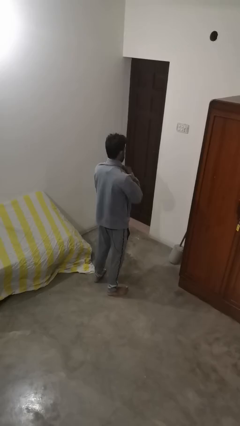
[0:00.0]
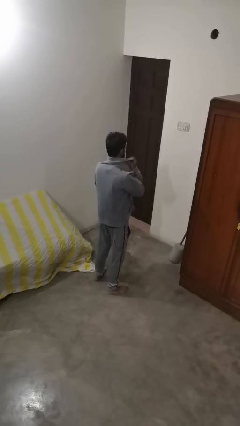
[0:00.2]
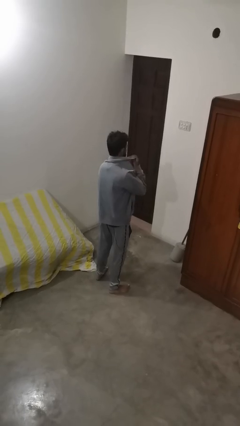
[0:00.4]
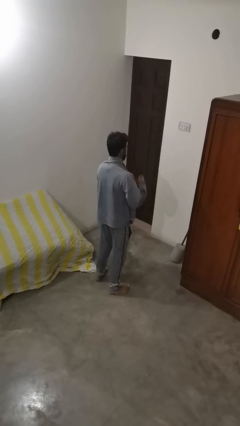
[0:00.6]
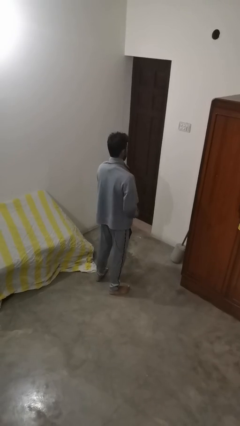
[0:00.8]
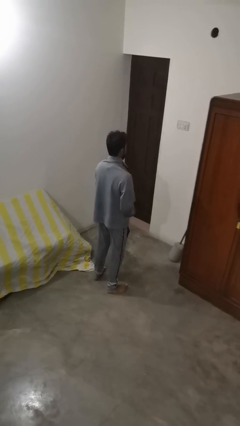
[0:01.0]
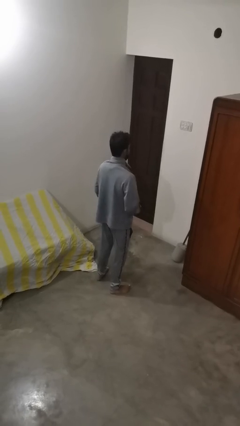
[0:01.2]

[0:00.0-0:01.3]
person unzips jacket

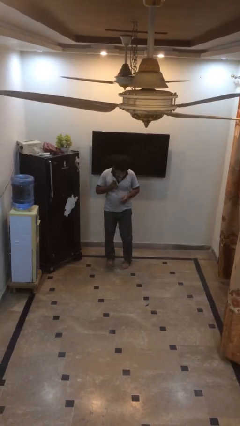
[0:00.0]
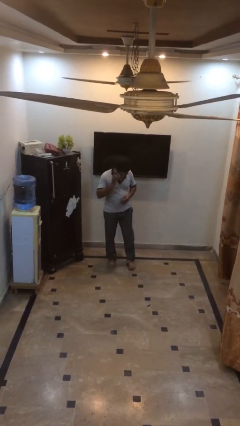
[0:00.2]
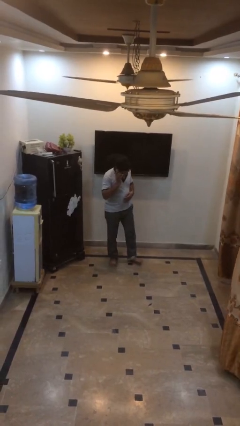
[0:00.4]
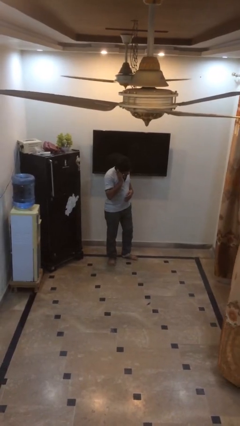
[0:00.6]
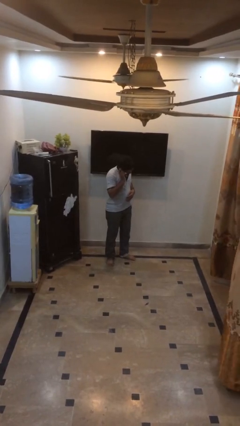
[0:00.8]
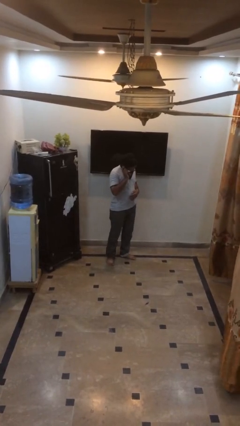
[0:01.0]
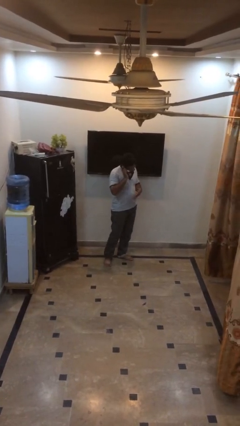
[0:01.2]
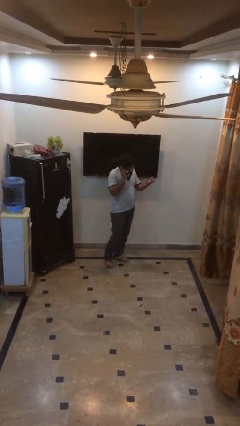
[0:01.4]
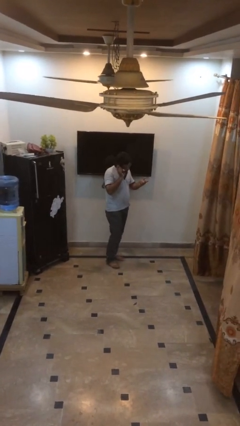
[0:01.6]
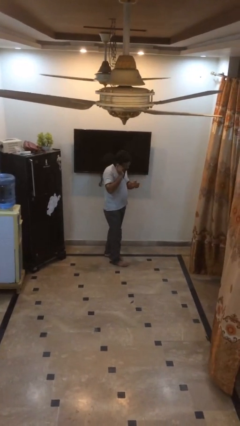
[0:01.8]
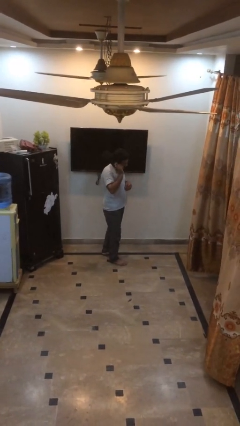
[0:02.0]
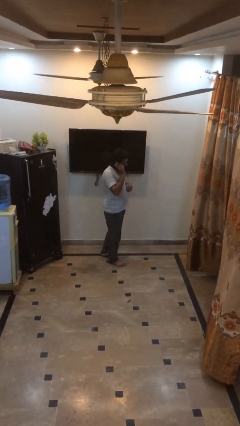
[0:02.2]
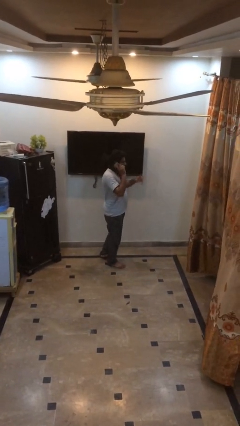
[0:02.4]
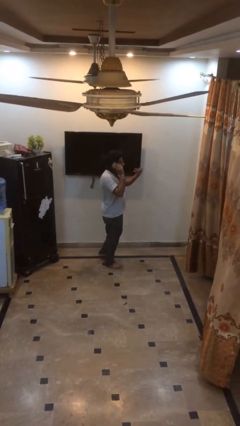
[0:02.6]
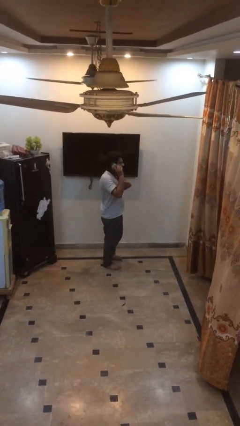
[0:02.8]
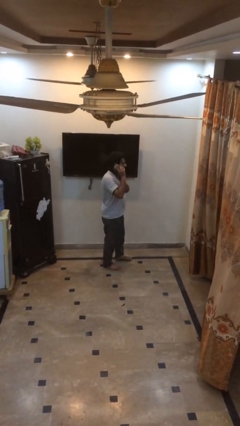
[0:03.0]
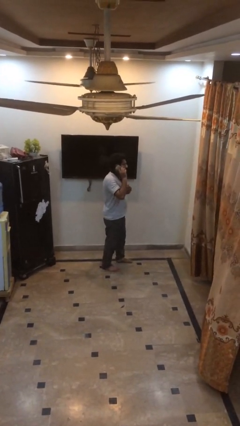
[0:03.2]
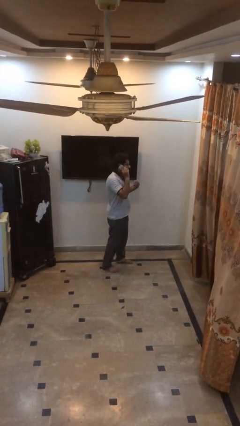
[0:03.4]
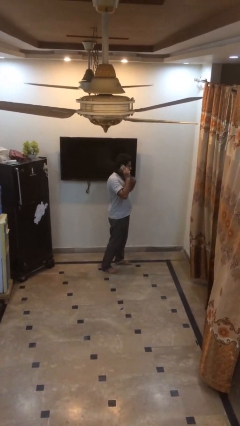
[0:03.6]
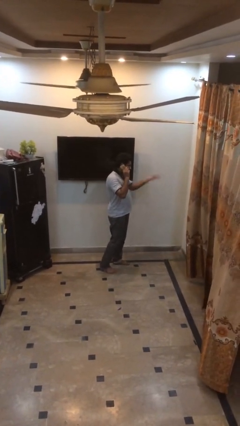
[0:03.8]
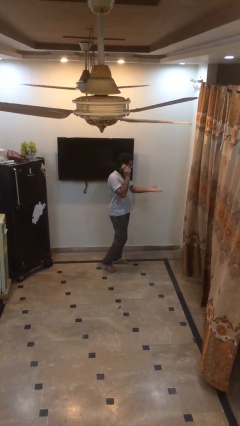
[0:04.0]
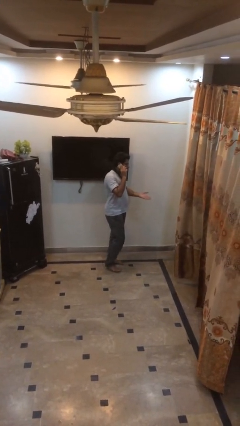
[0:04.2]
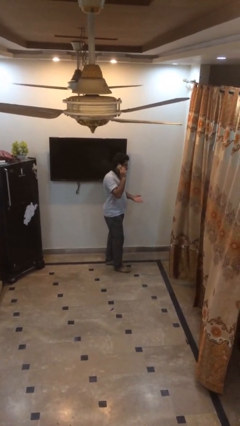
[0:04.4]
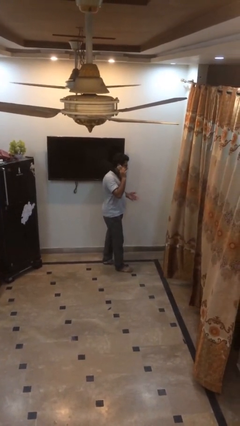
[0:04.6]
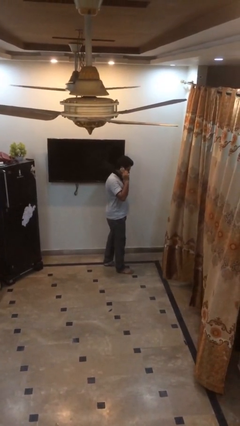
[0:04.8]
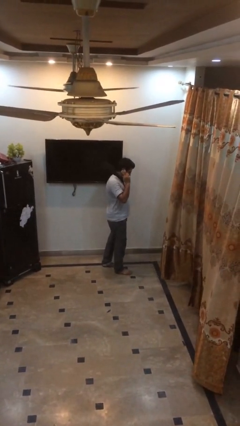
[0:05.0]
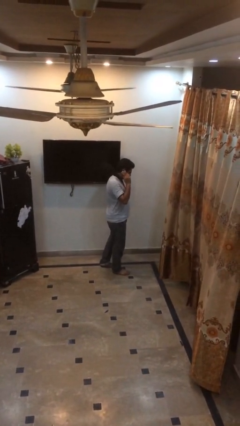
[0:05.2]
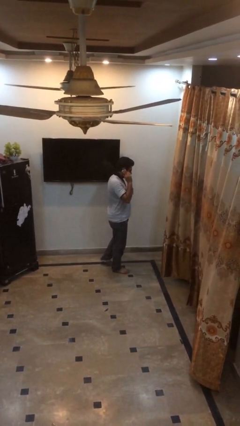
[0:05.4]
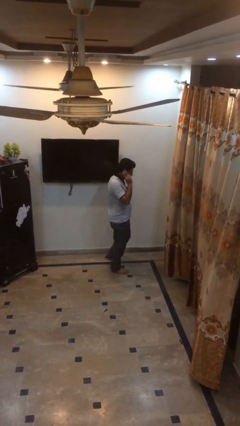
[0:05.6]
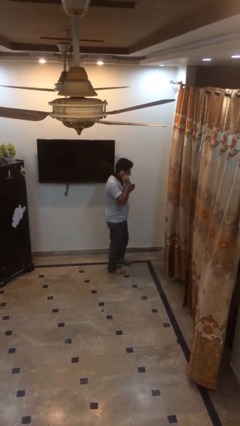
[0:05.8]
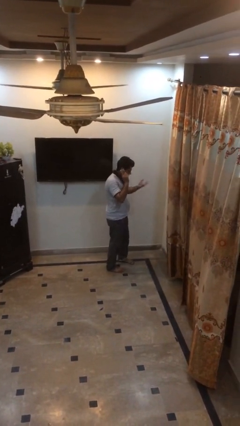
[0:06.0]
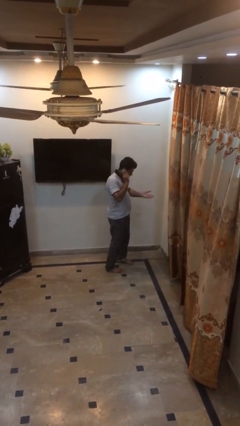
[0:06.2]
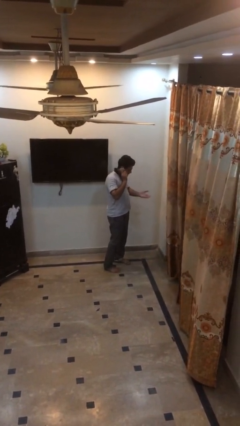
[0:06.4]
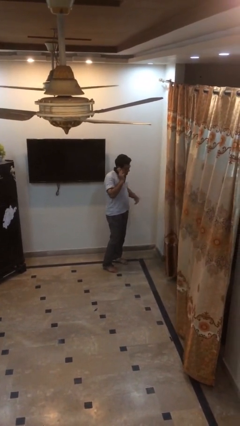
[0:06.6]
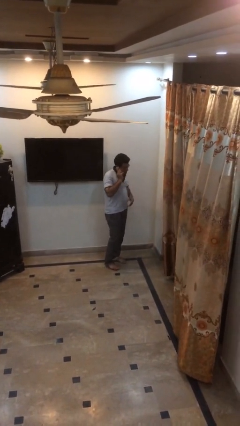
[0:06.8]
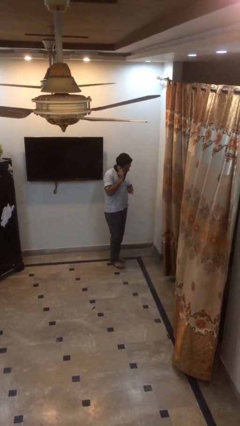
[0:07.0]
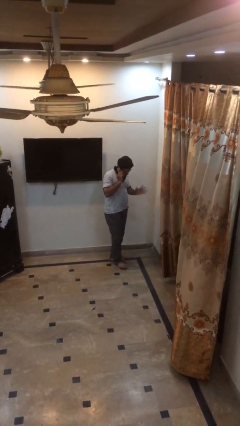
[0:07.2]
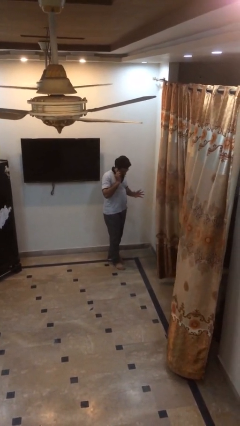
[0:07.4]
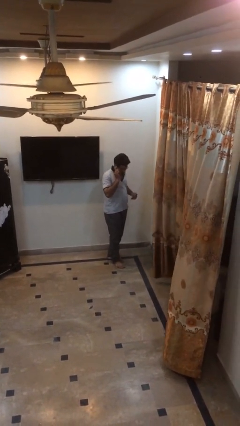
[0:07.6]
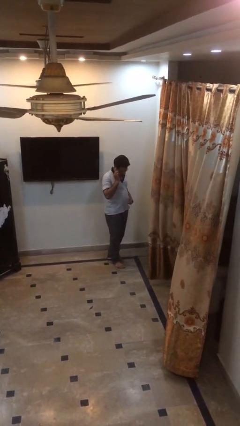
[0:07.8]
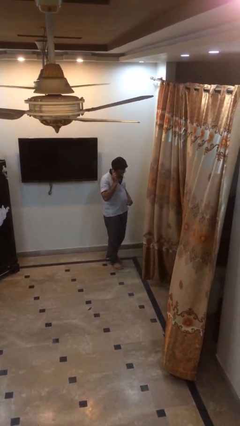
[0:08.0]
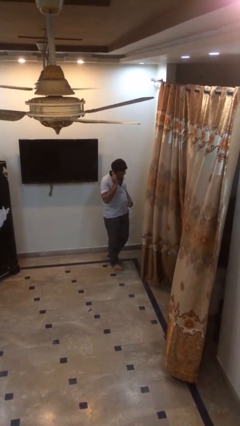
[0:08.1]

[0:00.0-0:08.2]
person talks on phone

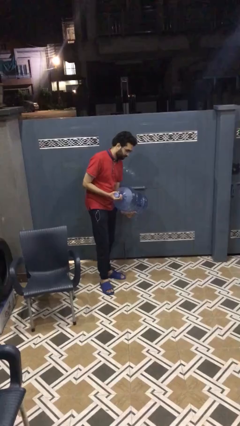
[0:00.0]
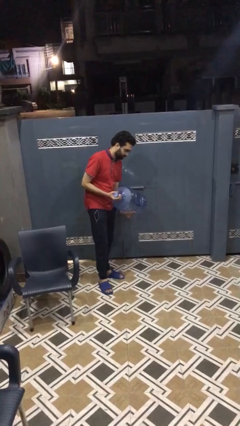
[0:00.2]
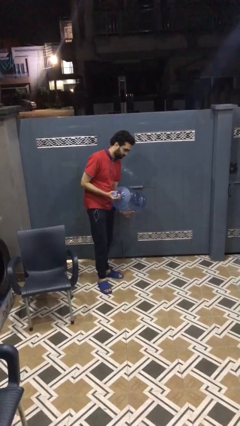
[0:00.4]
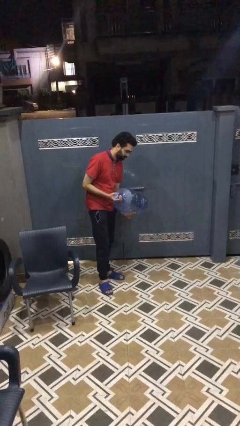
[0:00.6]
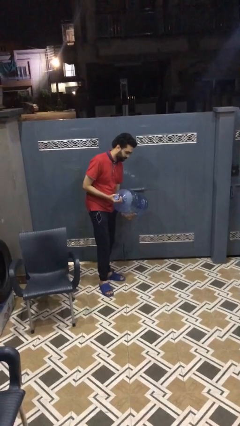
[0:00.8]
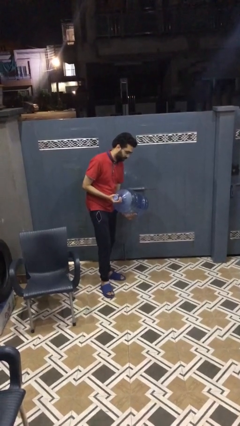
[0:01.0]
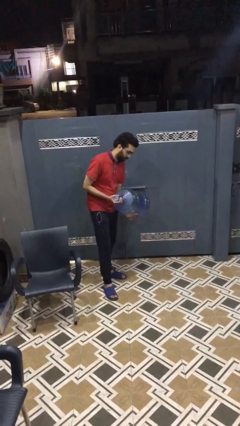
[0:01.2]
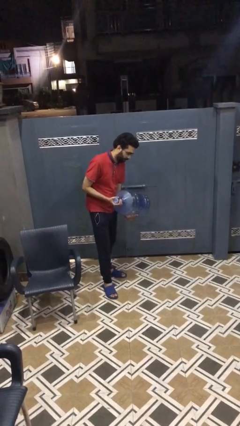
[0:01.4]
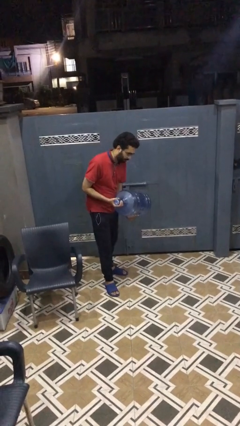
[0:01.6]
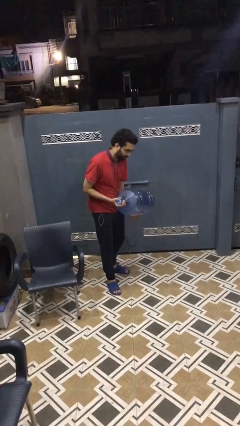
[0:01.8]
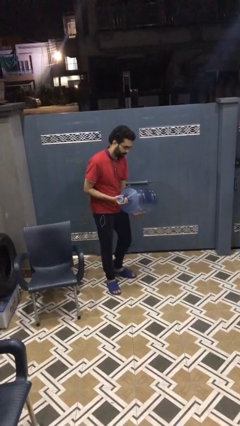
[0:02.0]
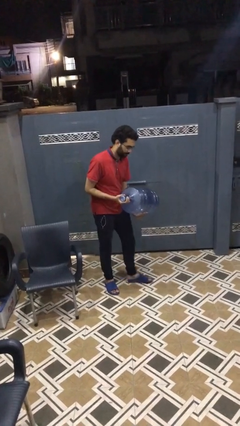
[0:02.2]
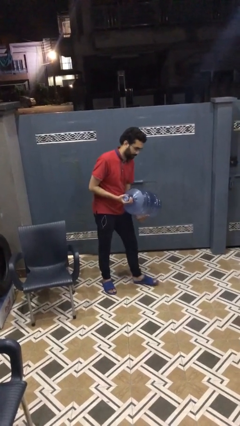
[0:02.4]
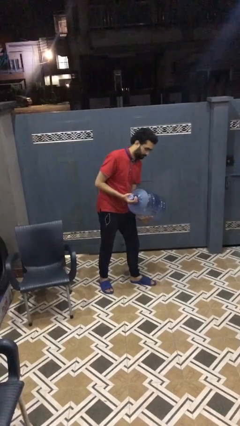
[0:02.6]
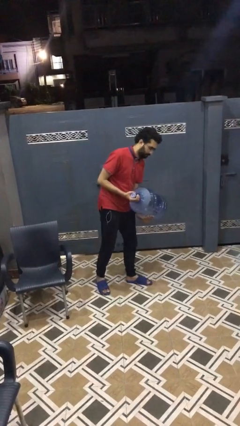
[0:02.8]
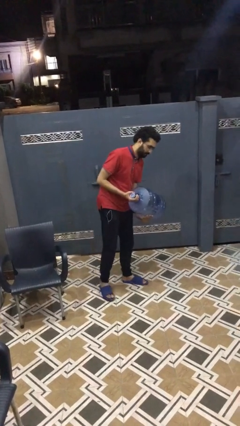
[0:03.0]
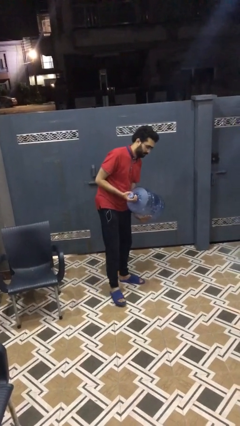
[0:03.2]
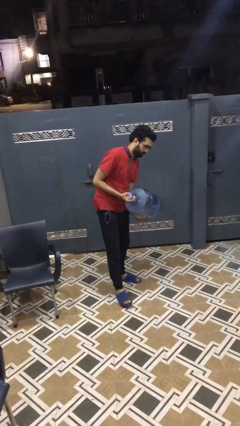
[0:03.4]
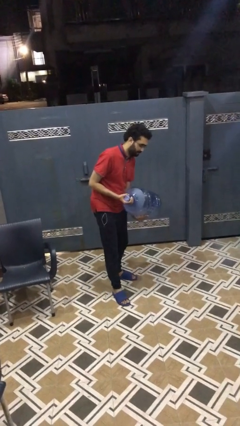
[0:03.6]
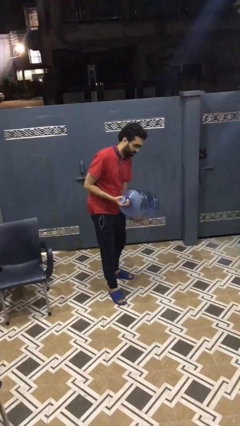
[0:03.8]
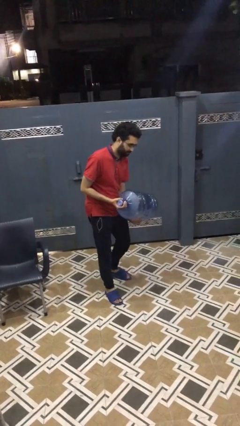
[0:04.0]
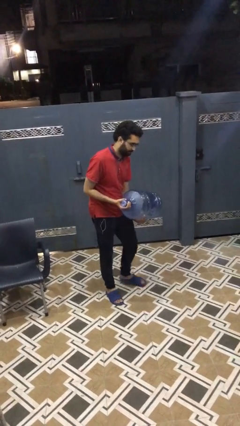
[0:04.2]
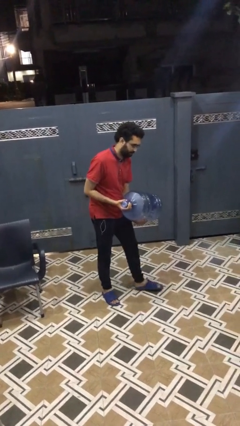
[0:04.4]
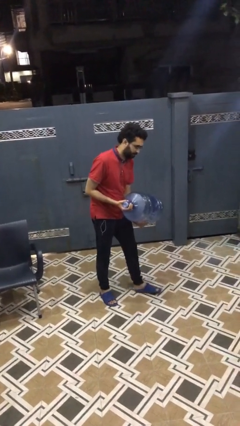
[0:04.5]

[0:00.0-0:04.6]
person carries heavy object

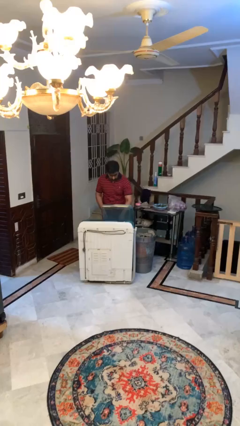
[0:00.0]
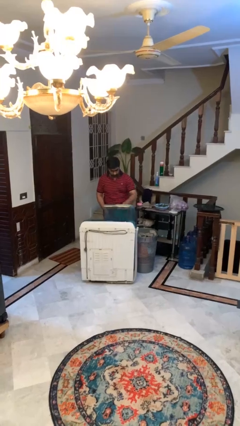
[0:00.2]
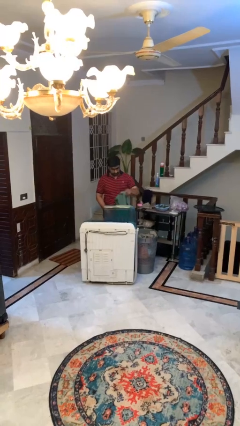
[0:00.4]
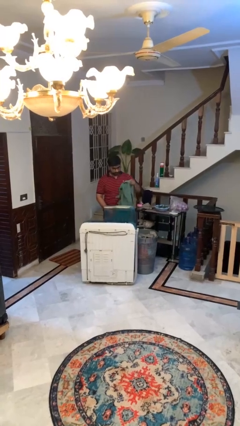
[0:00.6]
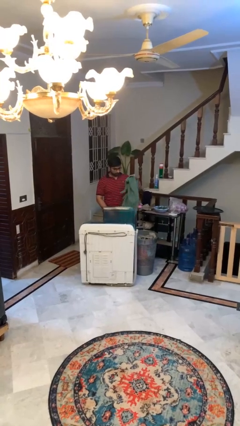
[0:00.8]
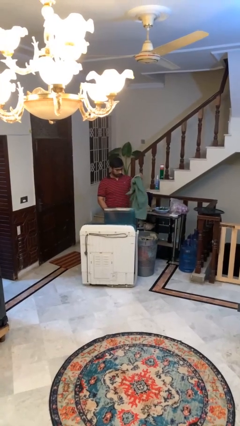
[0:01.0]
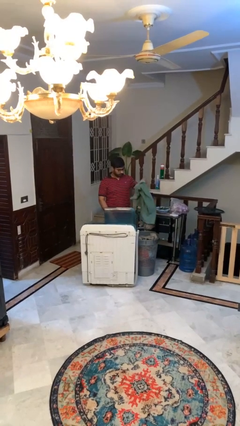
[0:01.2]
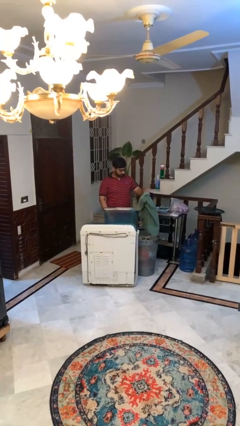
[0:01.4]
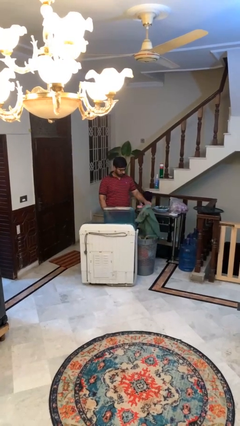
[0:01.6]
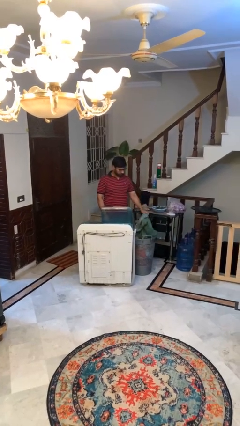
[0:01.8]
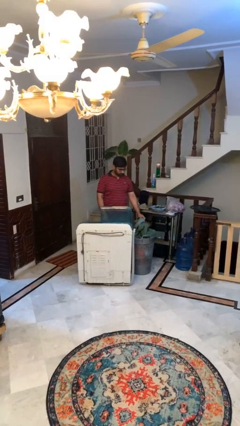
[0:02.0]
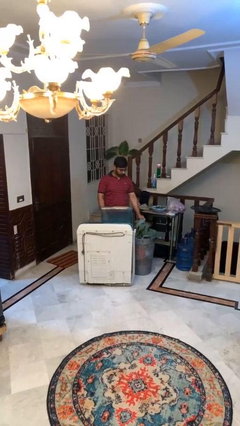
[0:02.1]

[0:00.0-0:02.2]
person unloads clotheswasher

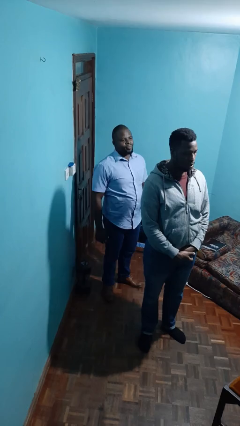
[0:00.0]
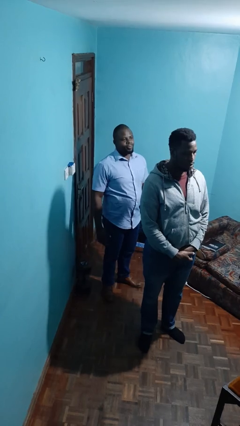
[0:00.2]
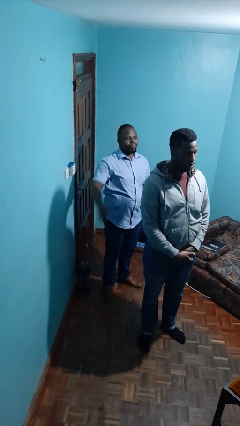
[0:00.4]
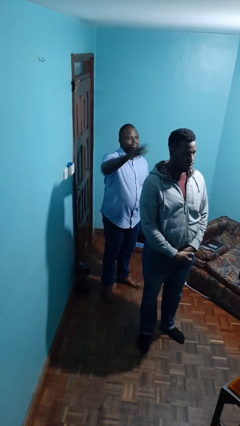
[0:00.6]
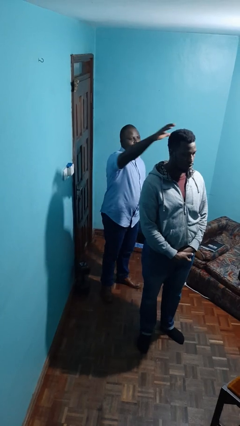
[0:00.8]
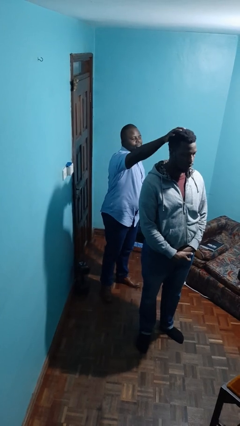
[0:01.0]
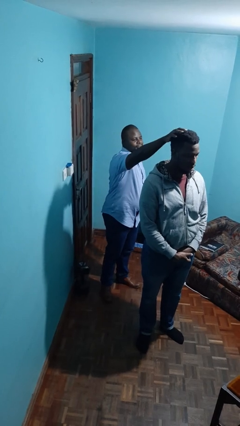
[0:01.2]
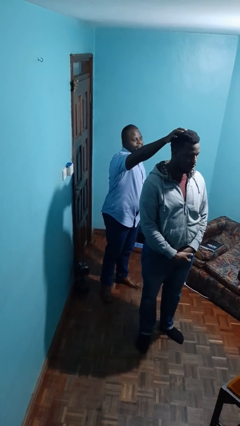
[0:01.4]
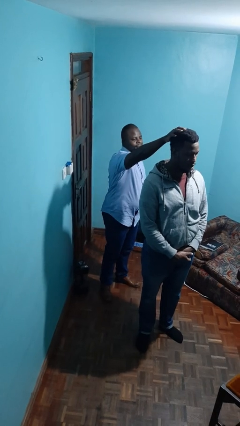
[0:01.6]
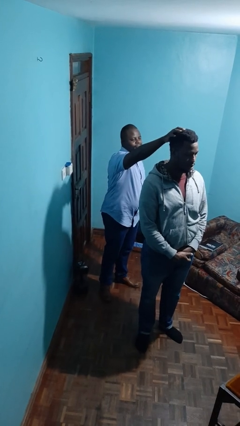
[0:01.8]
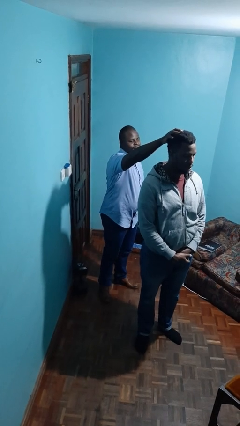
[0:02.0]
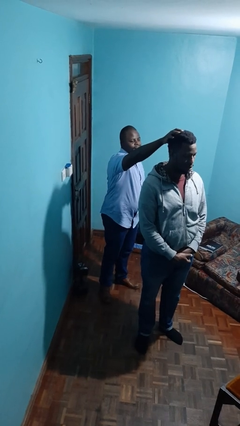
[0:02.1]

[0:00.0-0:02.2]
person grabs person by hair
